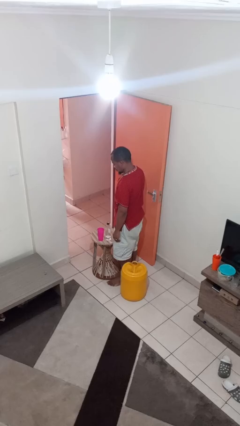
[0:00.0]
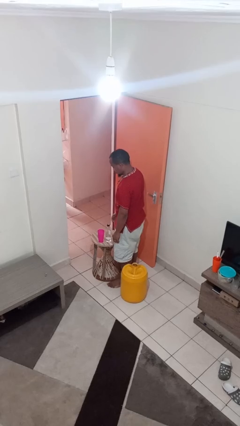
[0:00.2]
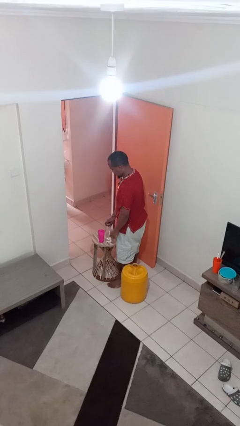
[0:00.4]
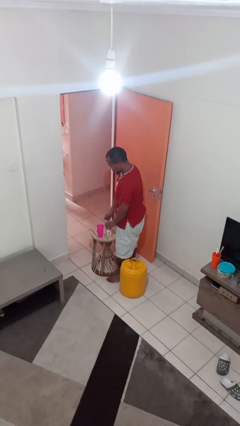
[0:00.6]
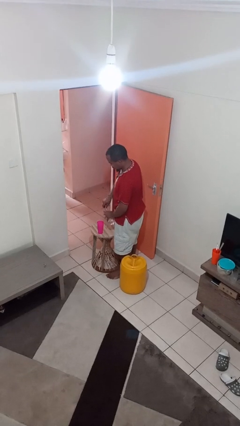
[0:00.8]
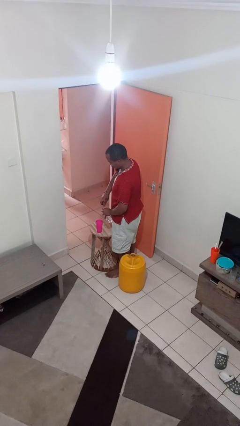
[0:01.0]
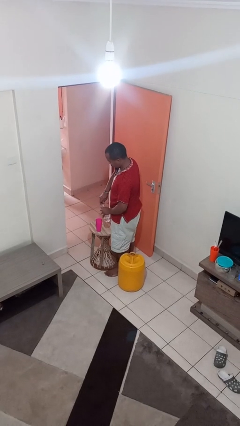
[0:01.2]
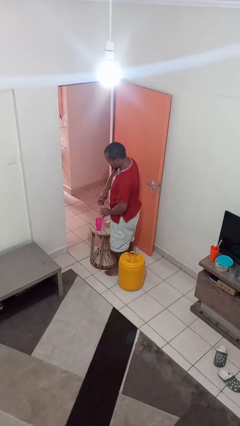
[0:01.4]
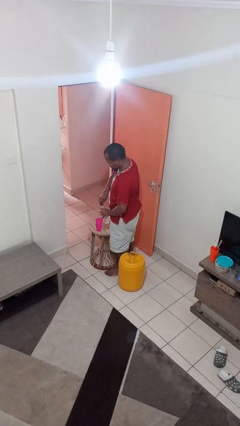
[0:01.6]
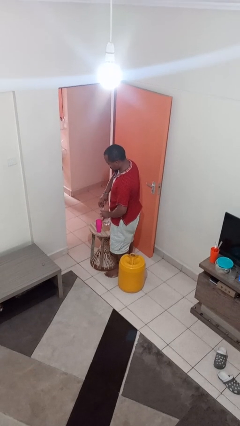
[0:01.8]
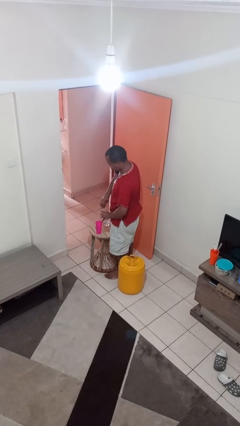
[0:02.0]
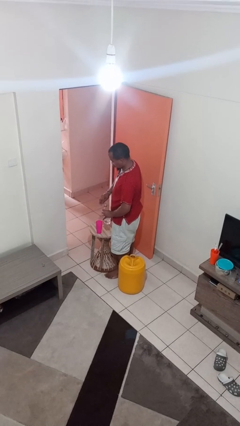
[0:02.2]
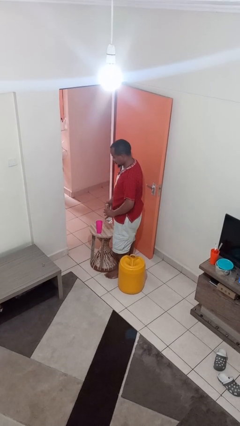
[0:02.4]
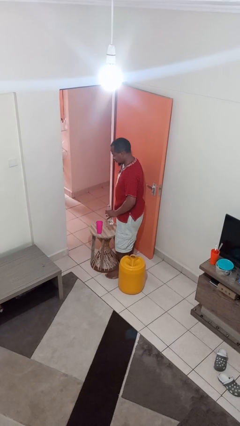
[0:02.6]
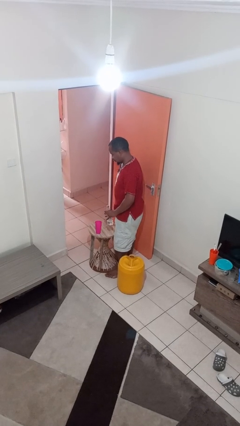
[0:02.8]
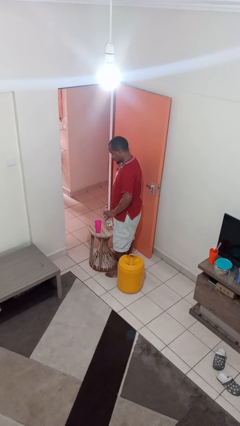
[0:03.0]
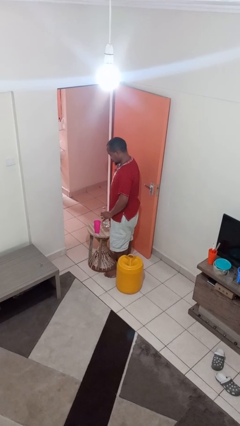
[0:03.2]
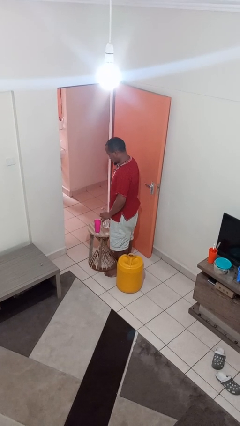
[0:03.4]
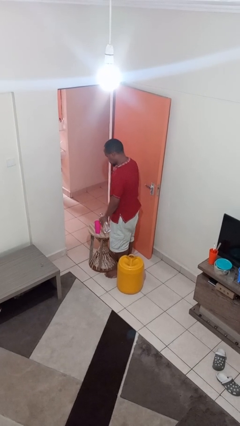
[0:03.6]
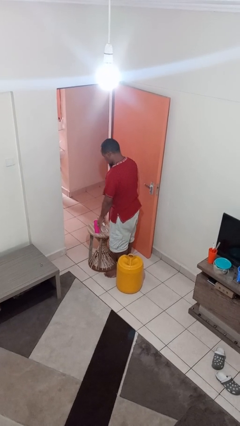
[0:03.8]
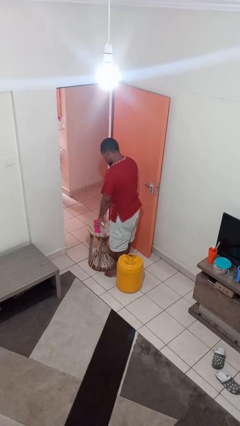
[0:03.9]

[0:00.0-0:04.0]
person unscrews lid from bottle

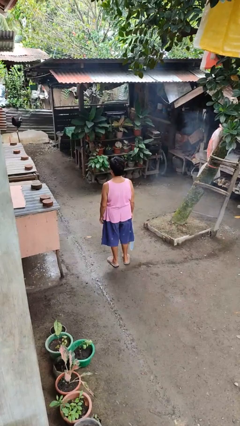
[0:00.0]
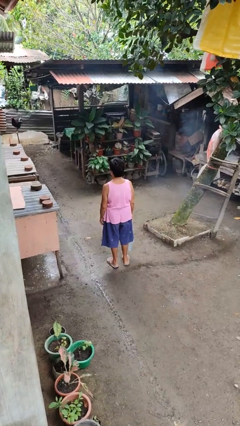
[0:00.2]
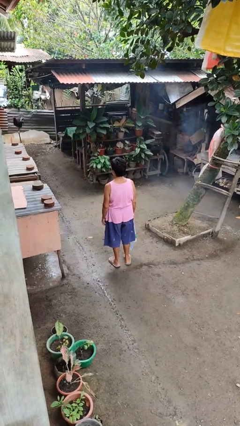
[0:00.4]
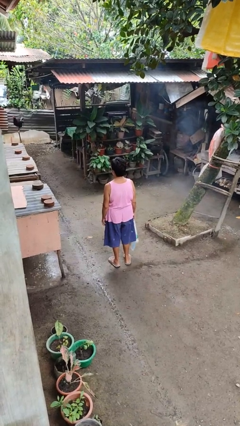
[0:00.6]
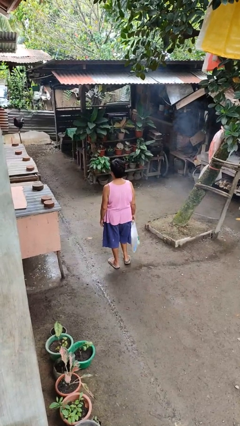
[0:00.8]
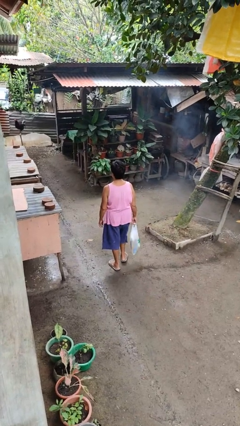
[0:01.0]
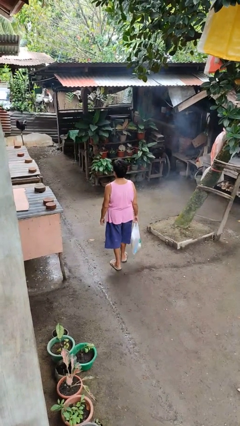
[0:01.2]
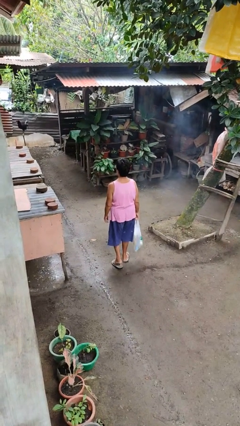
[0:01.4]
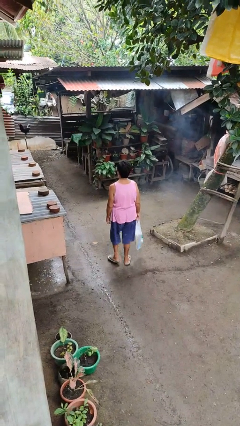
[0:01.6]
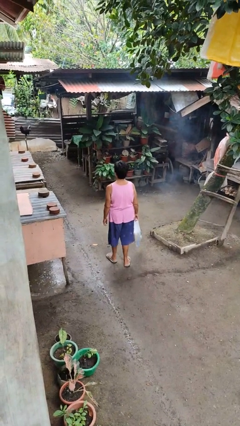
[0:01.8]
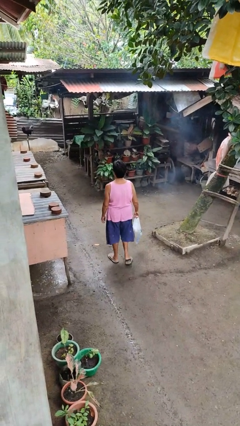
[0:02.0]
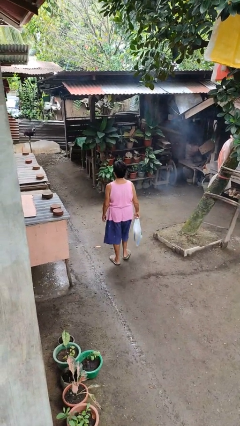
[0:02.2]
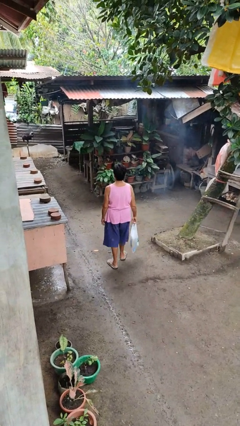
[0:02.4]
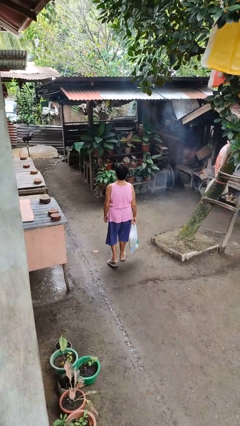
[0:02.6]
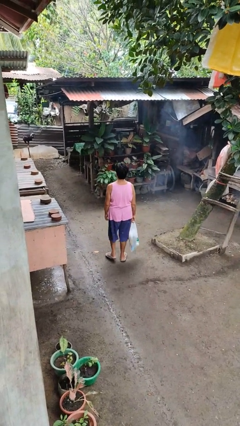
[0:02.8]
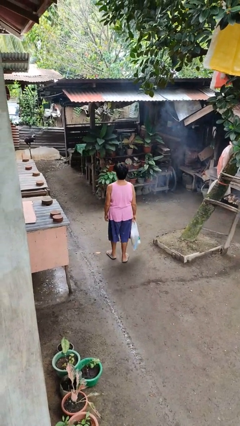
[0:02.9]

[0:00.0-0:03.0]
person carries groceries

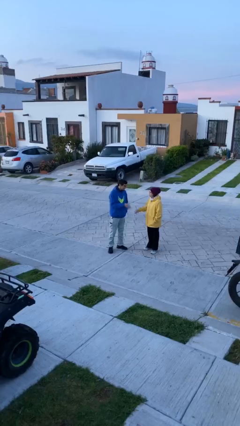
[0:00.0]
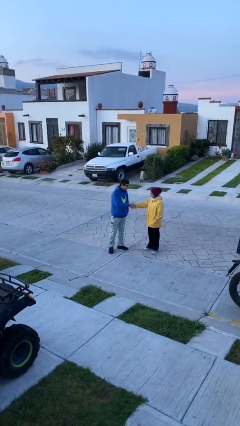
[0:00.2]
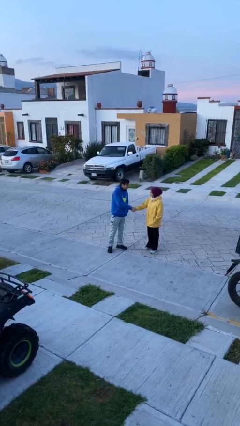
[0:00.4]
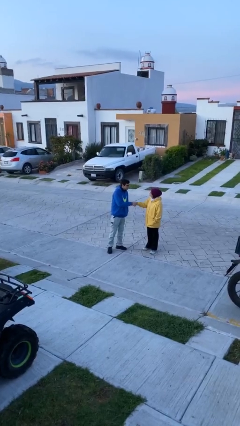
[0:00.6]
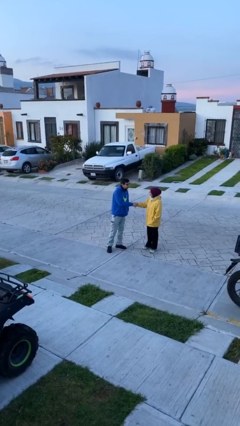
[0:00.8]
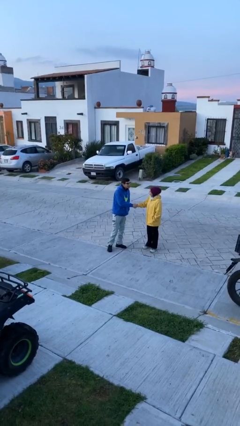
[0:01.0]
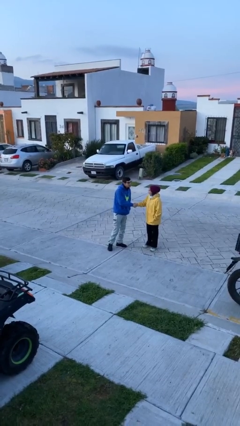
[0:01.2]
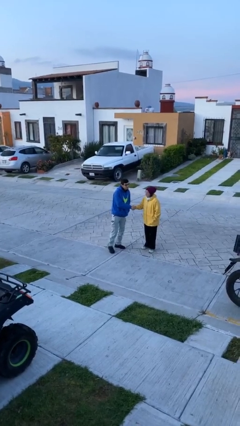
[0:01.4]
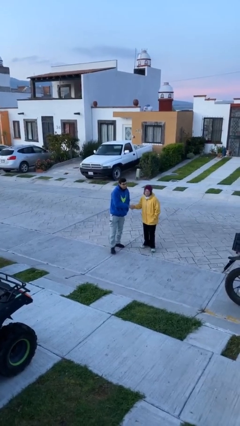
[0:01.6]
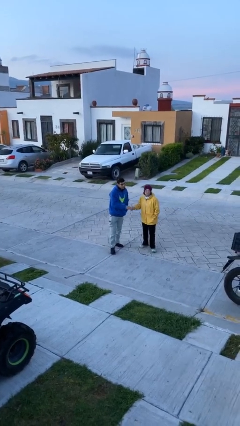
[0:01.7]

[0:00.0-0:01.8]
person shakes hand

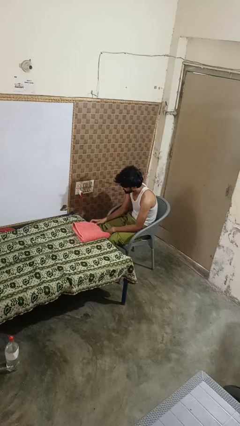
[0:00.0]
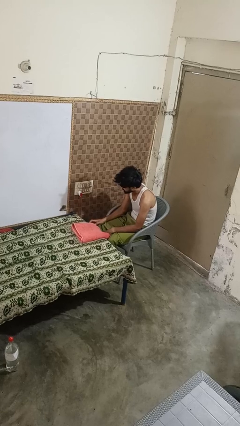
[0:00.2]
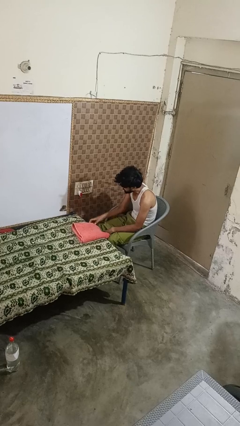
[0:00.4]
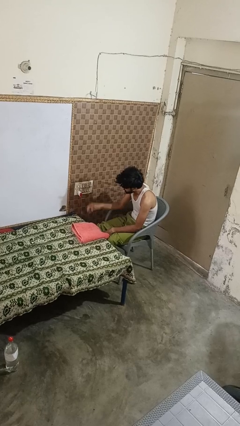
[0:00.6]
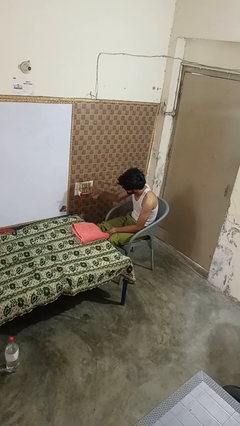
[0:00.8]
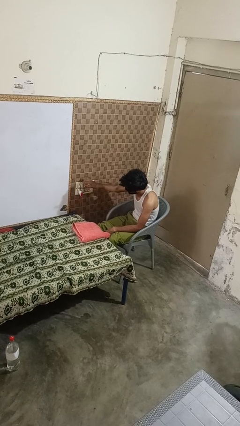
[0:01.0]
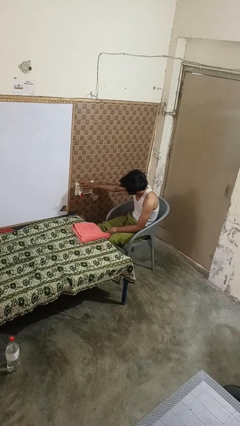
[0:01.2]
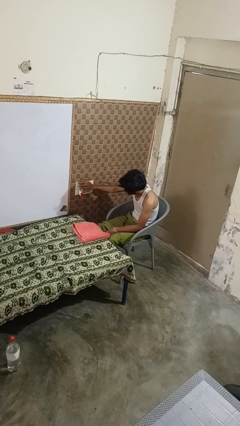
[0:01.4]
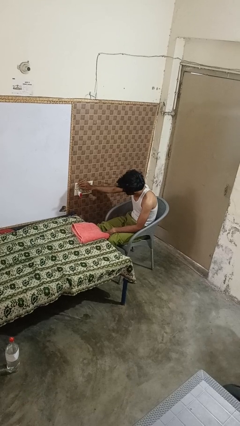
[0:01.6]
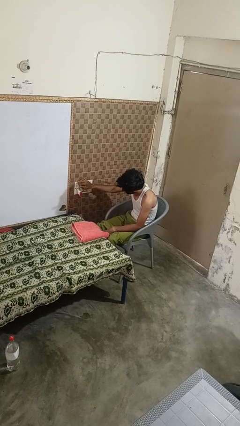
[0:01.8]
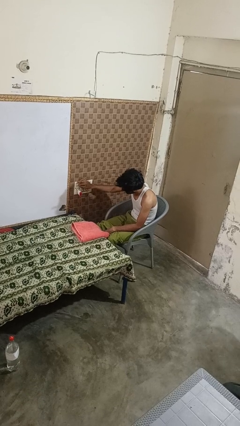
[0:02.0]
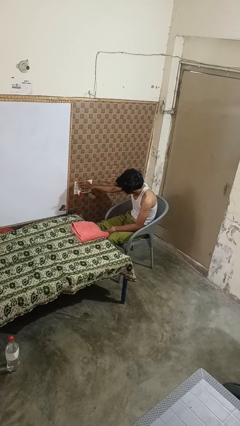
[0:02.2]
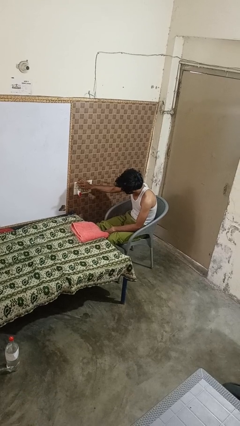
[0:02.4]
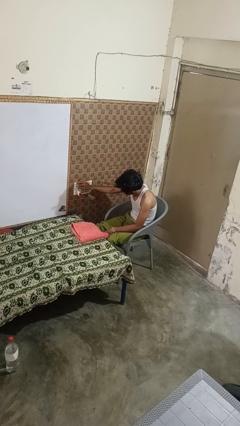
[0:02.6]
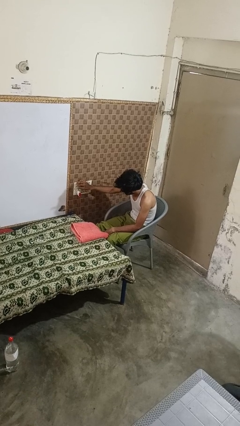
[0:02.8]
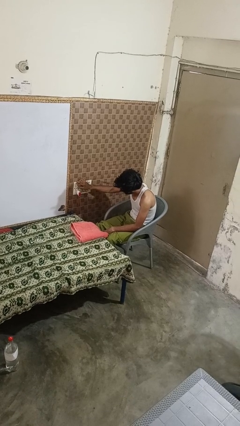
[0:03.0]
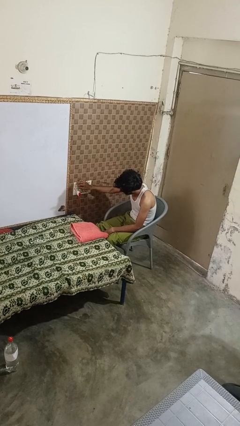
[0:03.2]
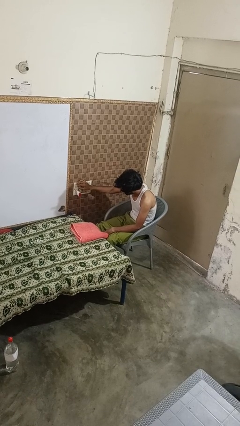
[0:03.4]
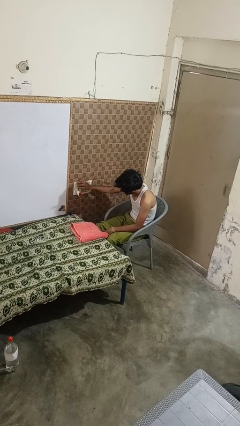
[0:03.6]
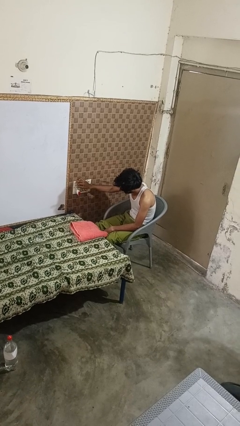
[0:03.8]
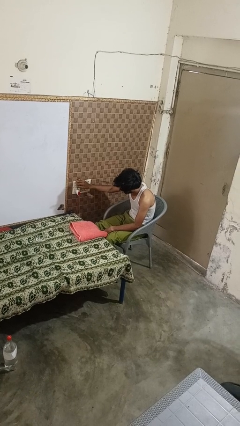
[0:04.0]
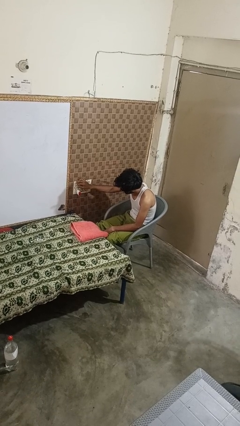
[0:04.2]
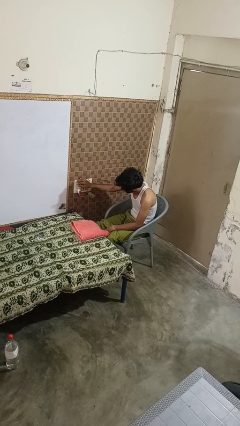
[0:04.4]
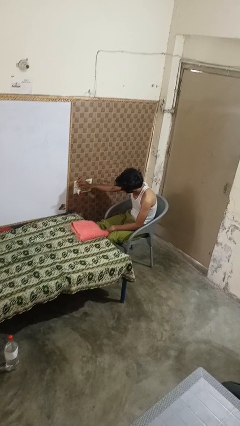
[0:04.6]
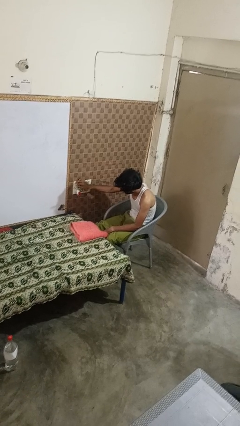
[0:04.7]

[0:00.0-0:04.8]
person adjusts thermostat

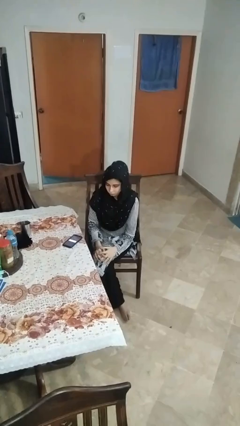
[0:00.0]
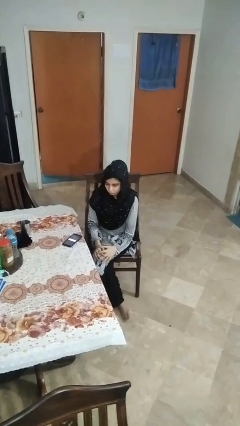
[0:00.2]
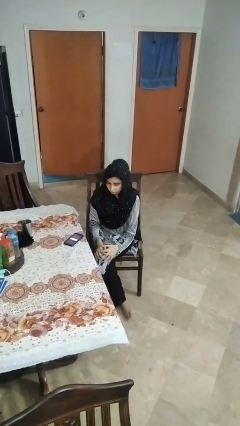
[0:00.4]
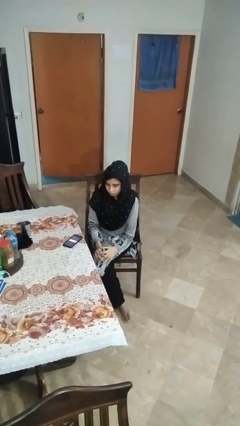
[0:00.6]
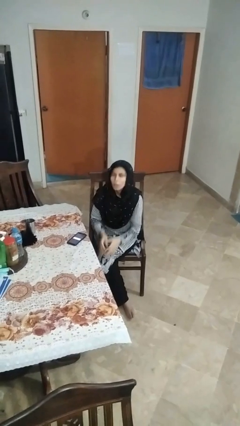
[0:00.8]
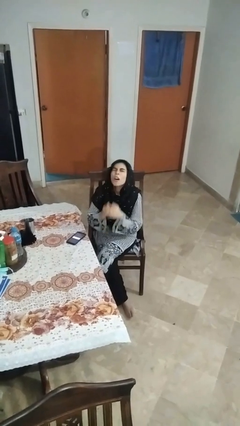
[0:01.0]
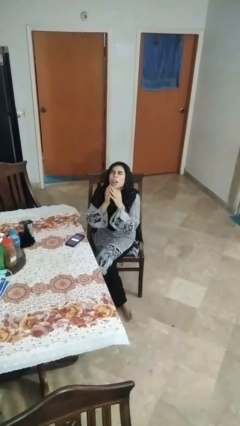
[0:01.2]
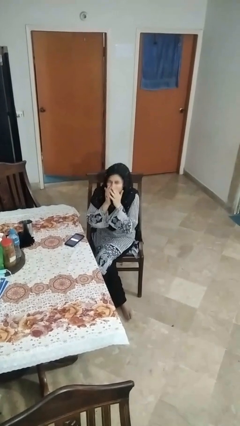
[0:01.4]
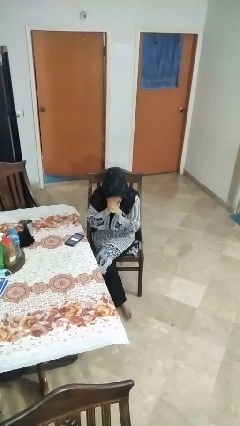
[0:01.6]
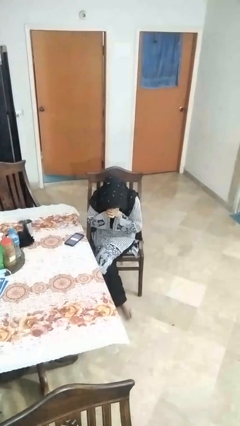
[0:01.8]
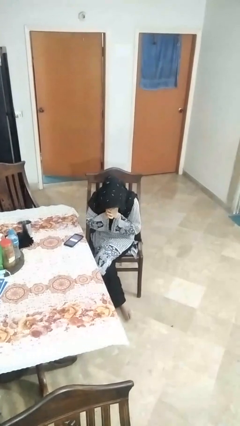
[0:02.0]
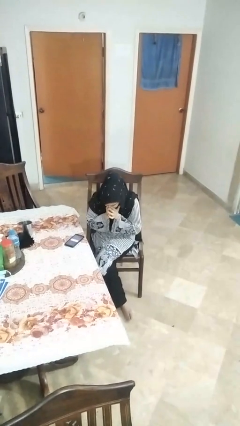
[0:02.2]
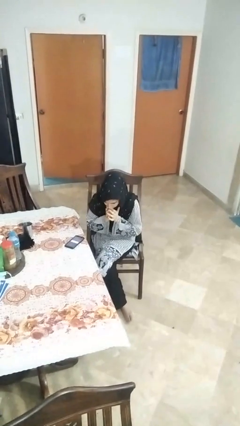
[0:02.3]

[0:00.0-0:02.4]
person sneezes into hand

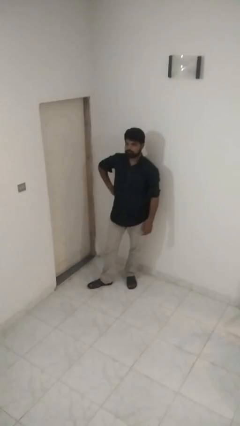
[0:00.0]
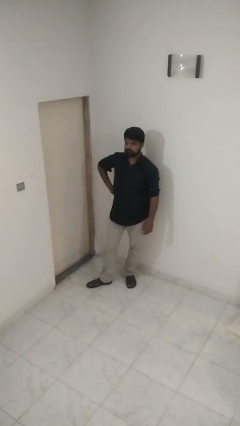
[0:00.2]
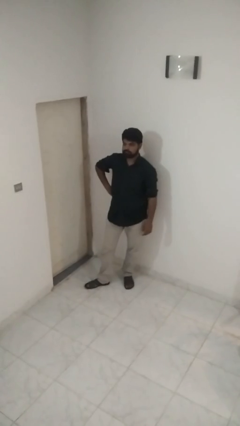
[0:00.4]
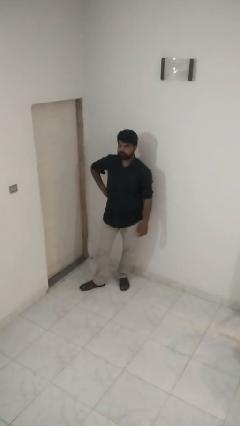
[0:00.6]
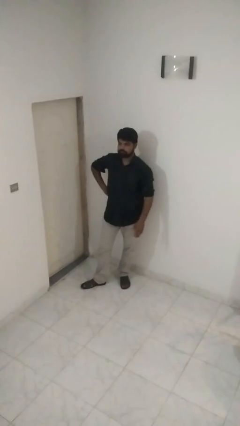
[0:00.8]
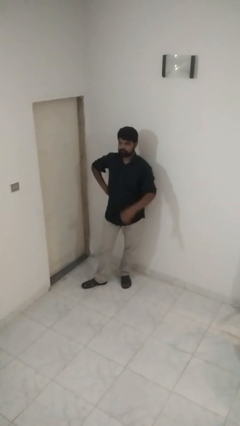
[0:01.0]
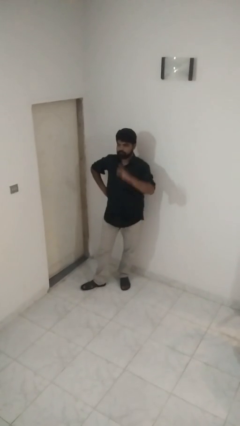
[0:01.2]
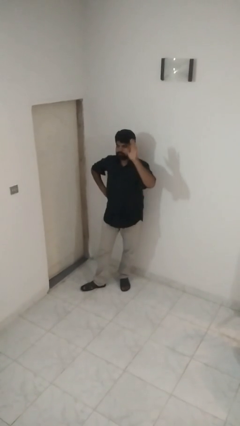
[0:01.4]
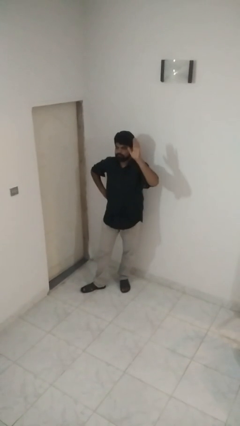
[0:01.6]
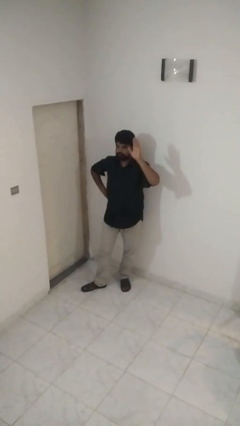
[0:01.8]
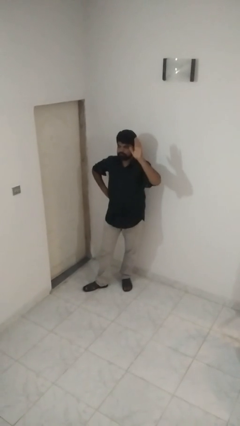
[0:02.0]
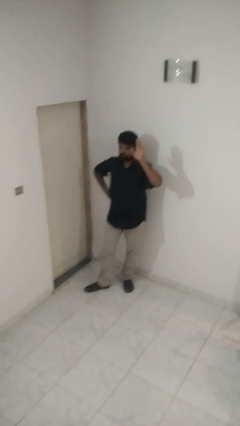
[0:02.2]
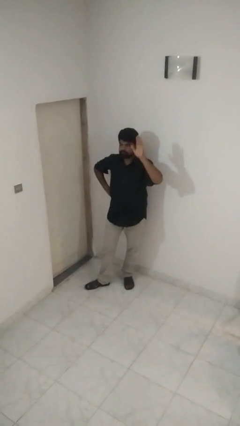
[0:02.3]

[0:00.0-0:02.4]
person gestures raise hand
